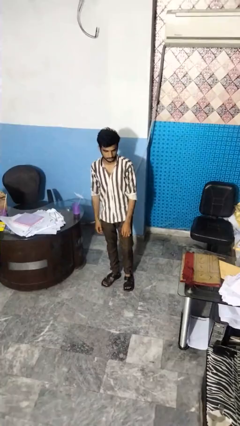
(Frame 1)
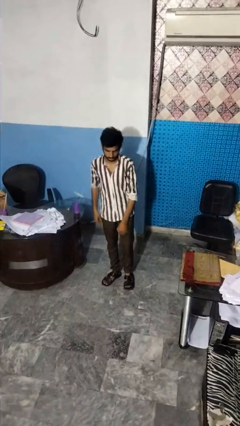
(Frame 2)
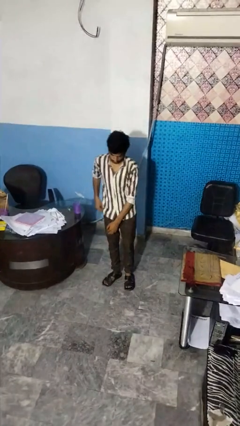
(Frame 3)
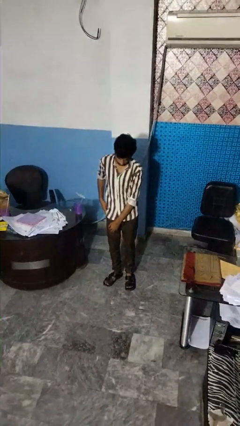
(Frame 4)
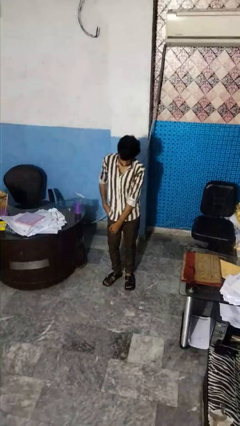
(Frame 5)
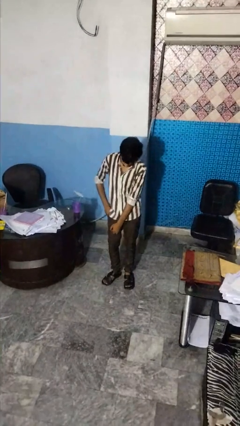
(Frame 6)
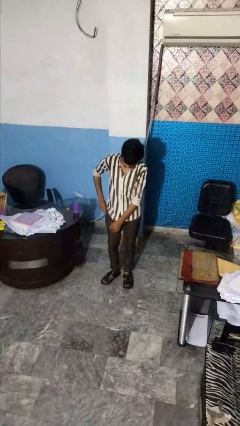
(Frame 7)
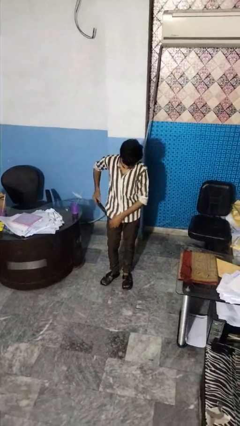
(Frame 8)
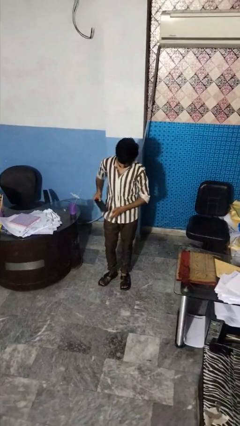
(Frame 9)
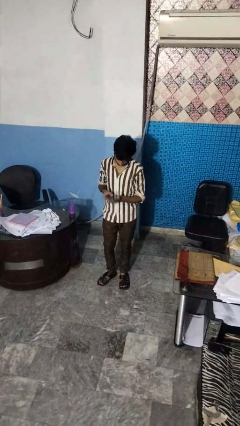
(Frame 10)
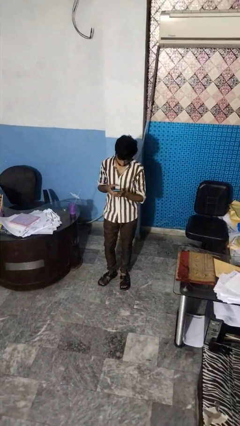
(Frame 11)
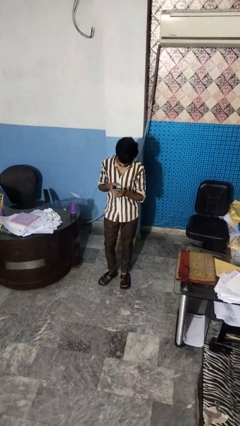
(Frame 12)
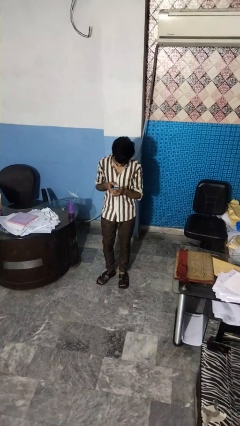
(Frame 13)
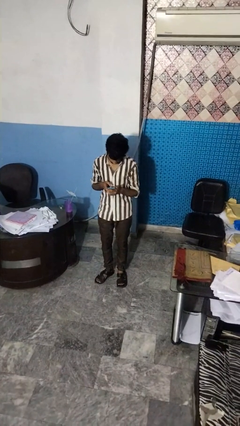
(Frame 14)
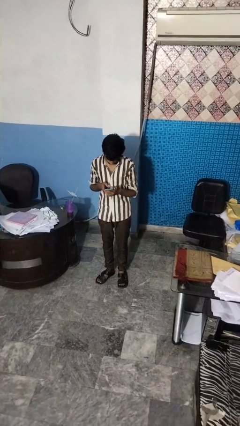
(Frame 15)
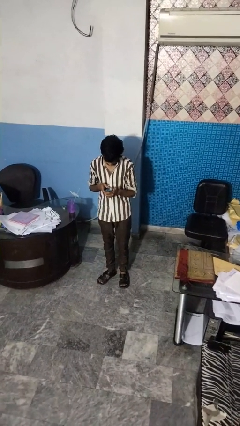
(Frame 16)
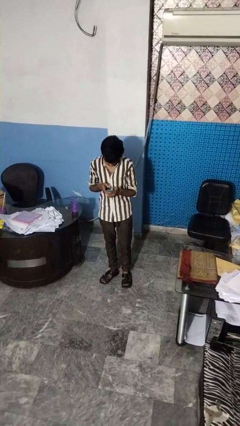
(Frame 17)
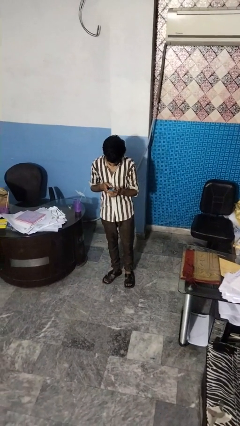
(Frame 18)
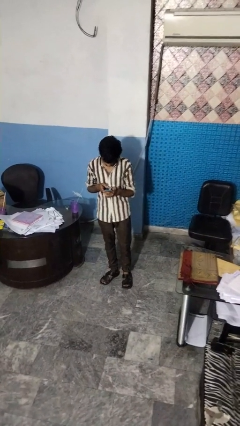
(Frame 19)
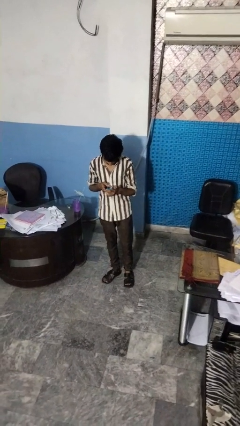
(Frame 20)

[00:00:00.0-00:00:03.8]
person takes phone from pocket

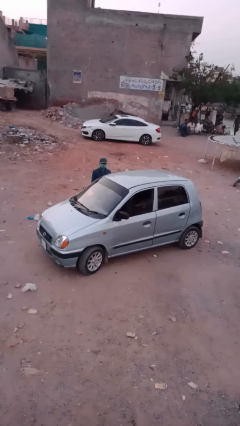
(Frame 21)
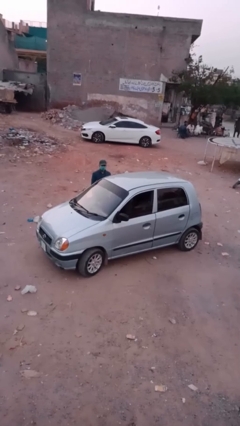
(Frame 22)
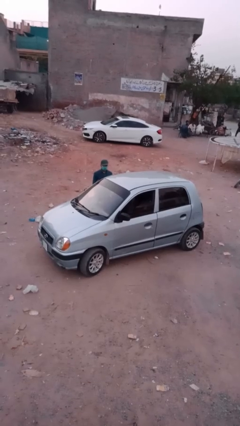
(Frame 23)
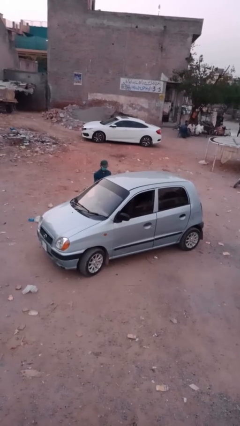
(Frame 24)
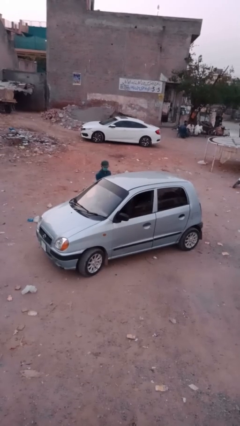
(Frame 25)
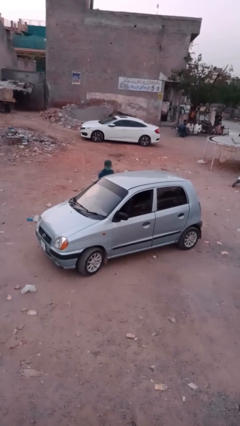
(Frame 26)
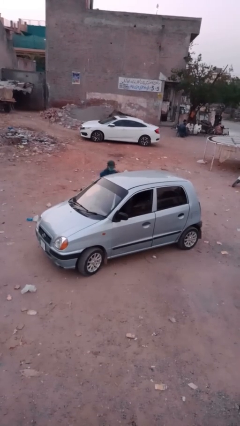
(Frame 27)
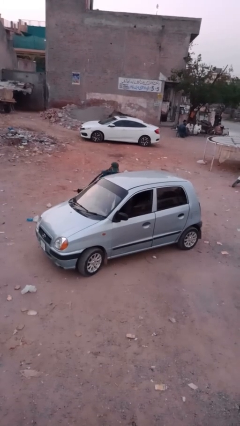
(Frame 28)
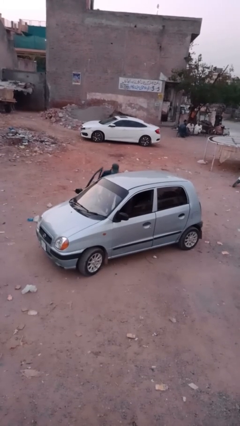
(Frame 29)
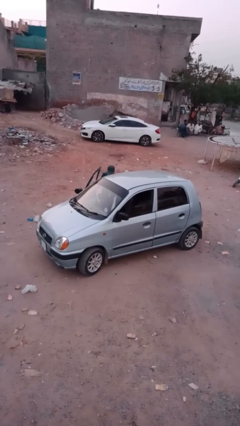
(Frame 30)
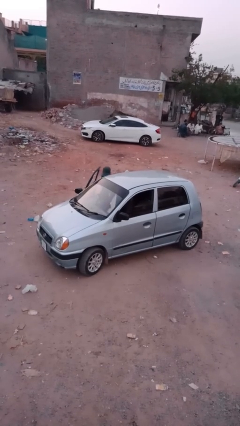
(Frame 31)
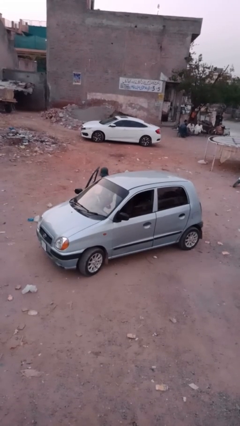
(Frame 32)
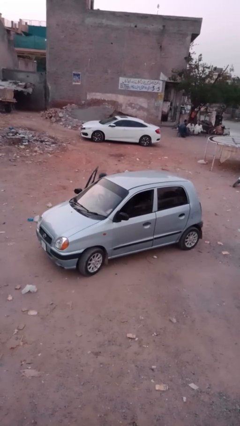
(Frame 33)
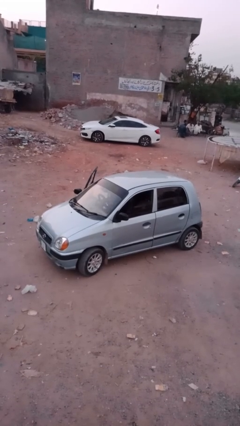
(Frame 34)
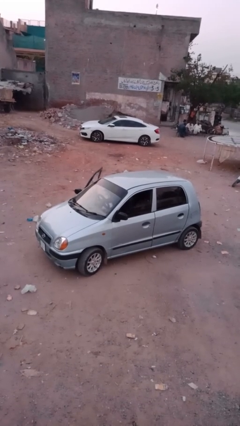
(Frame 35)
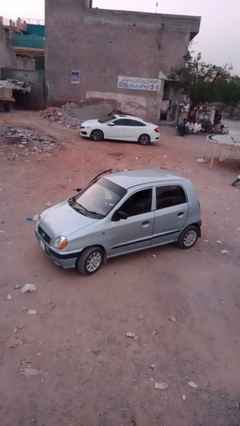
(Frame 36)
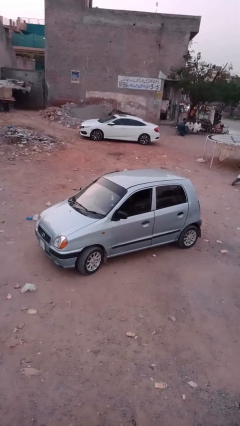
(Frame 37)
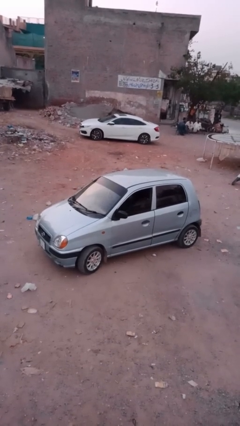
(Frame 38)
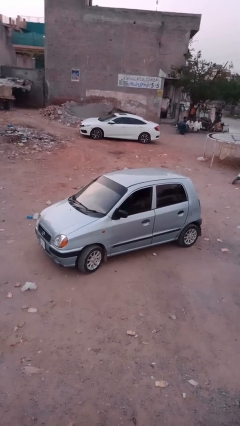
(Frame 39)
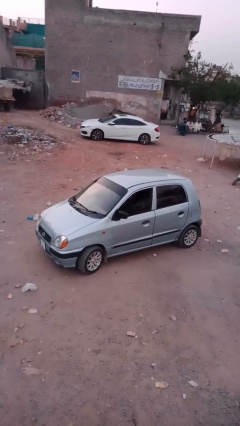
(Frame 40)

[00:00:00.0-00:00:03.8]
car picks up person

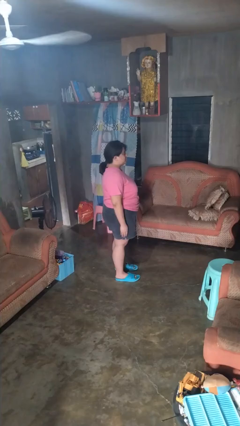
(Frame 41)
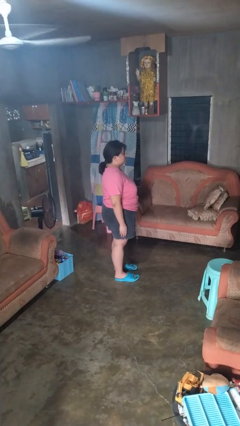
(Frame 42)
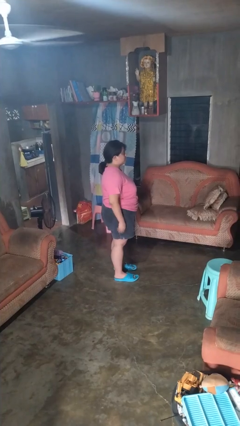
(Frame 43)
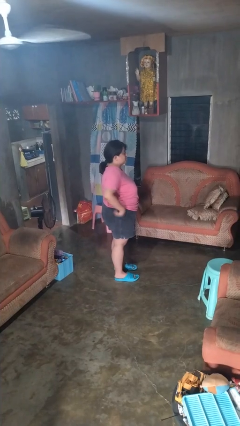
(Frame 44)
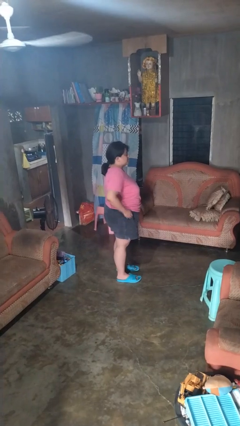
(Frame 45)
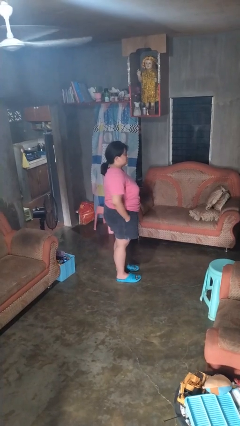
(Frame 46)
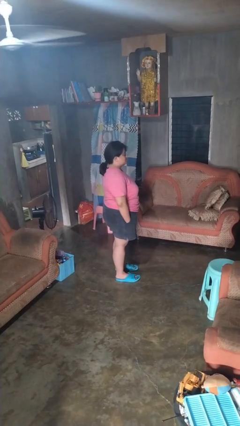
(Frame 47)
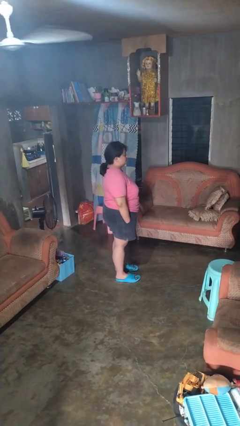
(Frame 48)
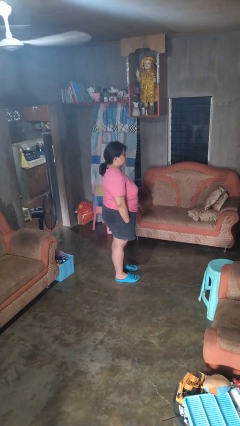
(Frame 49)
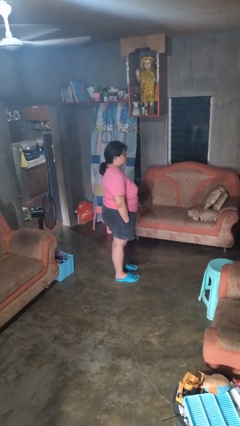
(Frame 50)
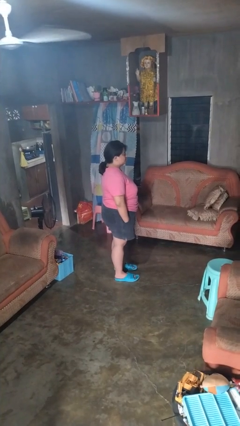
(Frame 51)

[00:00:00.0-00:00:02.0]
person puts hands in back pockets

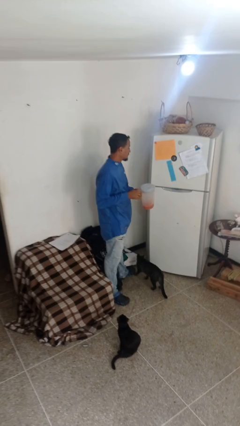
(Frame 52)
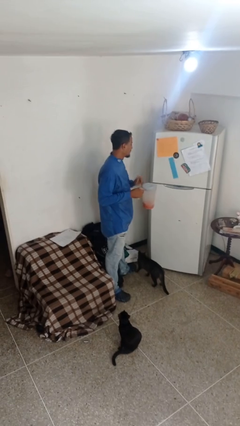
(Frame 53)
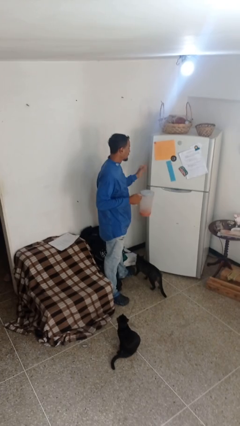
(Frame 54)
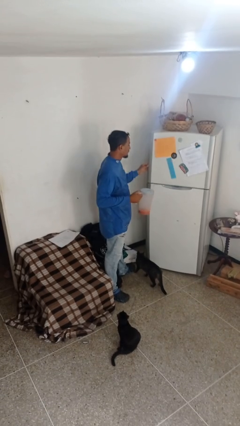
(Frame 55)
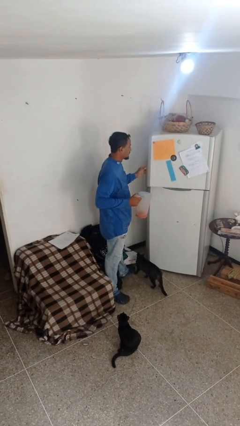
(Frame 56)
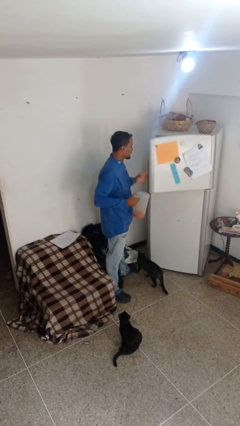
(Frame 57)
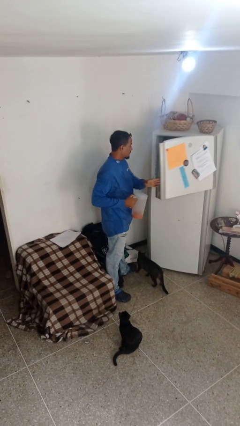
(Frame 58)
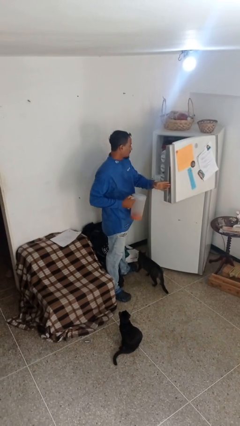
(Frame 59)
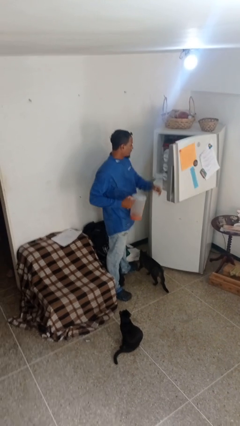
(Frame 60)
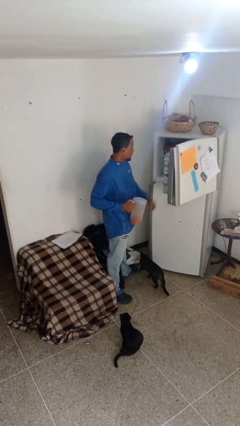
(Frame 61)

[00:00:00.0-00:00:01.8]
person opens refrigerator

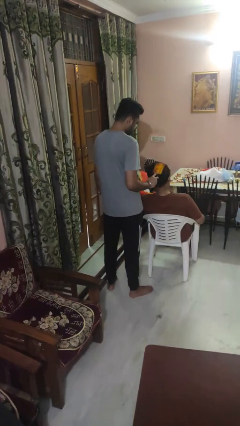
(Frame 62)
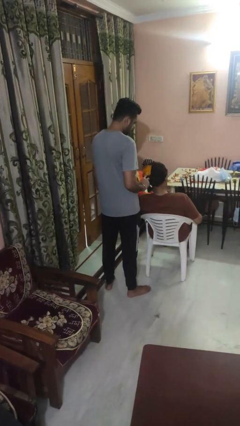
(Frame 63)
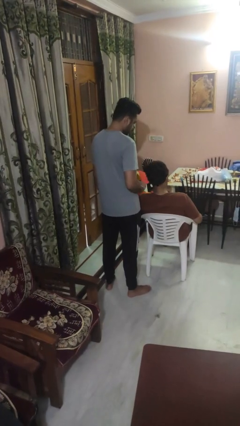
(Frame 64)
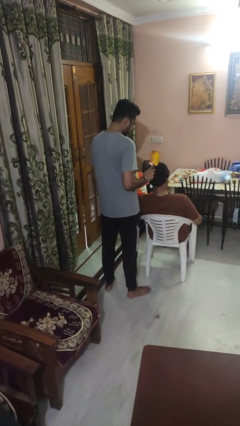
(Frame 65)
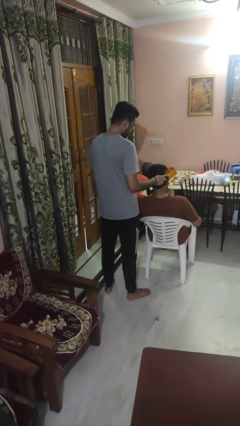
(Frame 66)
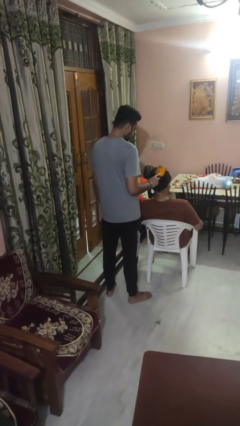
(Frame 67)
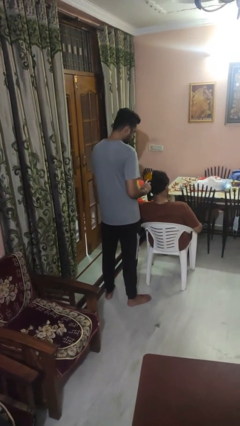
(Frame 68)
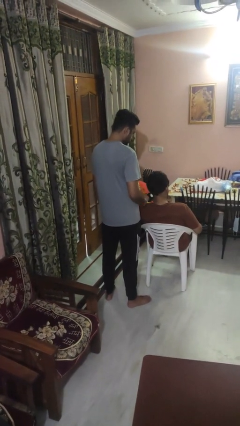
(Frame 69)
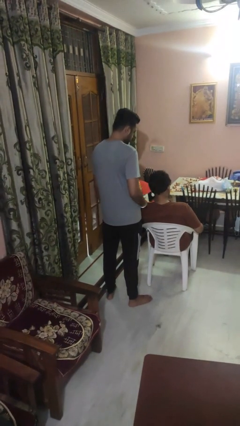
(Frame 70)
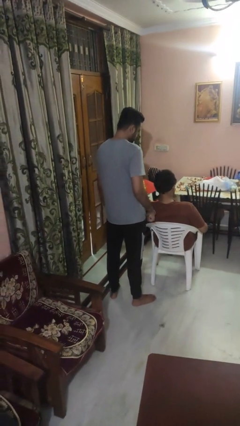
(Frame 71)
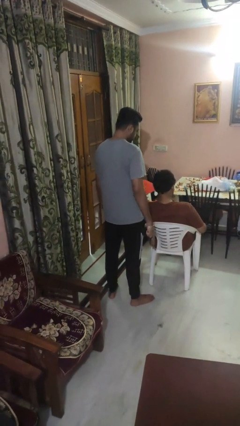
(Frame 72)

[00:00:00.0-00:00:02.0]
person brushes hair of person

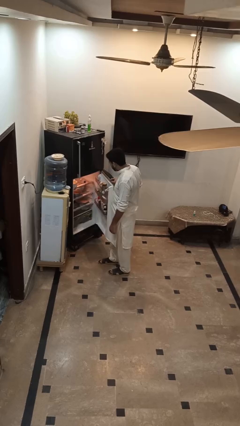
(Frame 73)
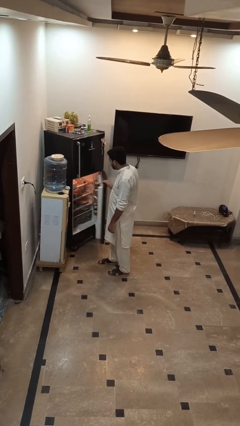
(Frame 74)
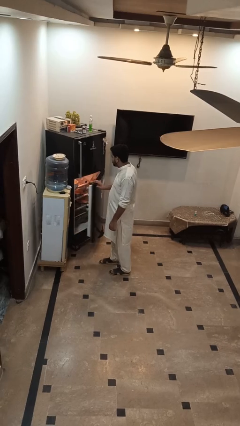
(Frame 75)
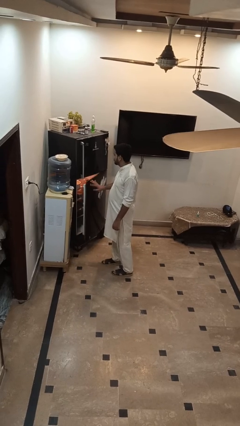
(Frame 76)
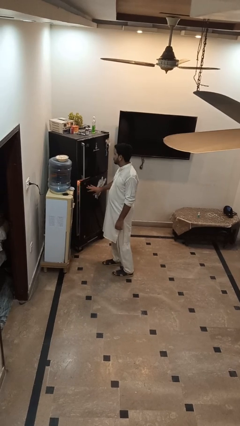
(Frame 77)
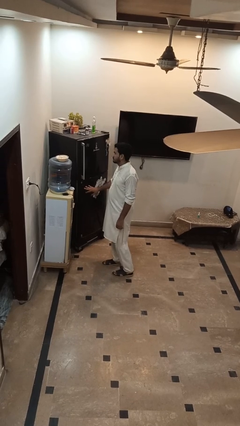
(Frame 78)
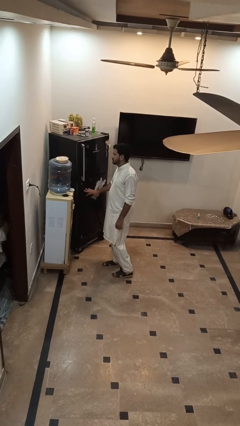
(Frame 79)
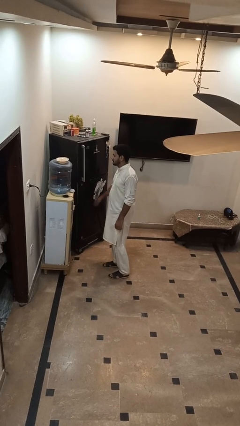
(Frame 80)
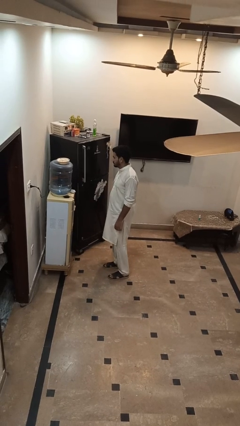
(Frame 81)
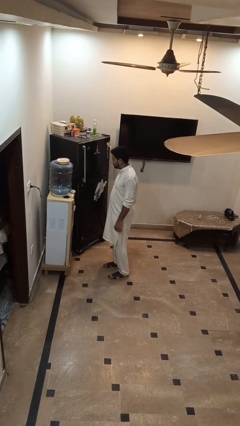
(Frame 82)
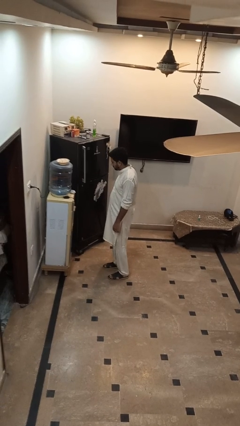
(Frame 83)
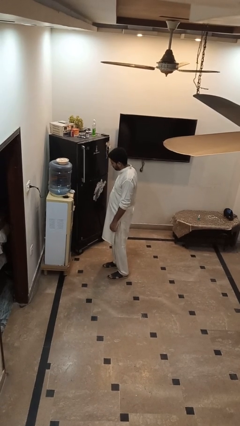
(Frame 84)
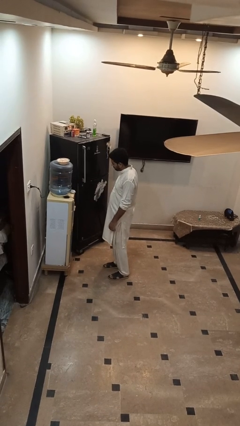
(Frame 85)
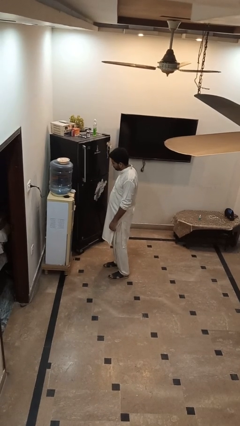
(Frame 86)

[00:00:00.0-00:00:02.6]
person closes refrigerator

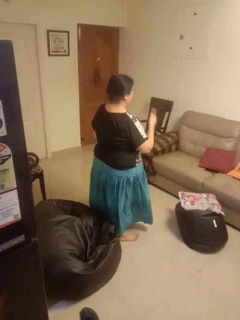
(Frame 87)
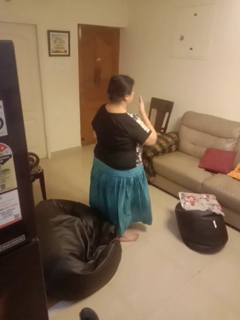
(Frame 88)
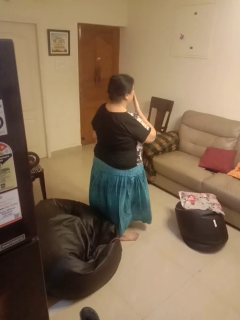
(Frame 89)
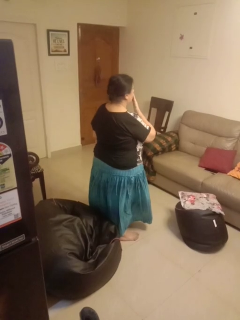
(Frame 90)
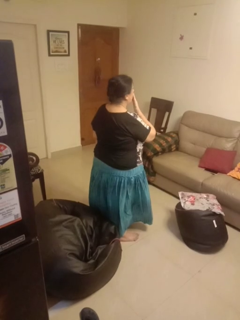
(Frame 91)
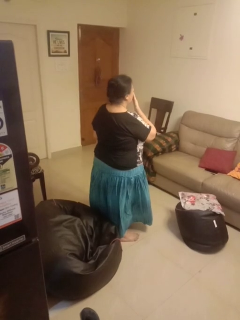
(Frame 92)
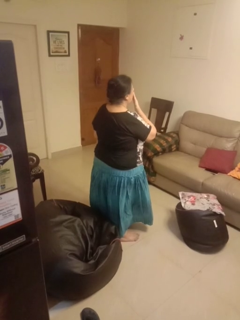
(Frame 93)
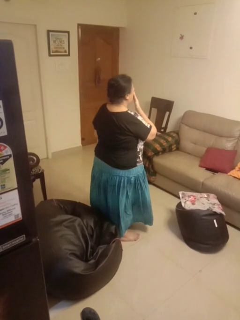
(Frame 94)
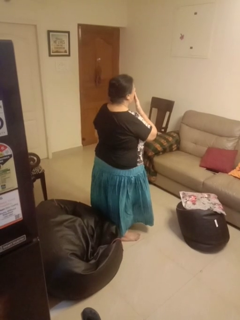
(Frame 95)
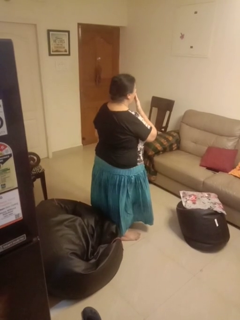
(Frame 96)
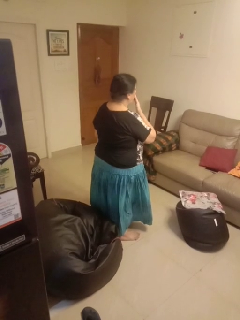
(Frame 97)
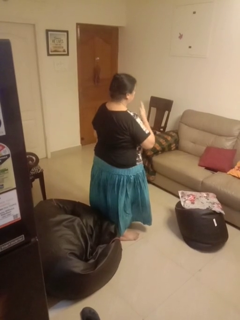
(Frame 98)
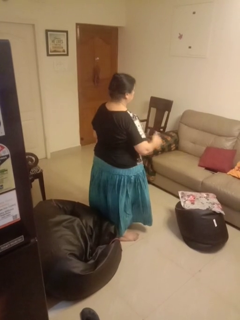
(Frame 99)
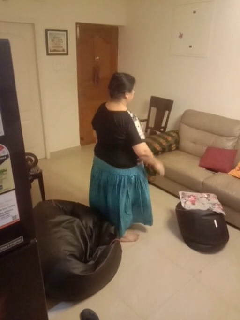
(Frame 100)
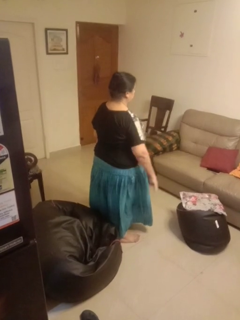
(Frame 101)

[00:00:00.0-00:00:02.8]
person yawns
